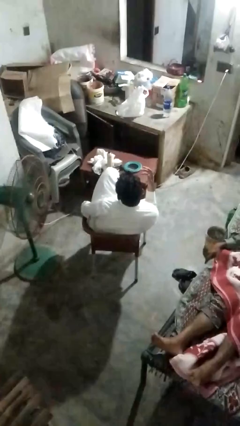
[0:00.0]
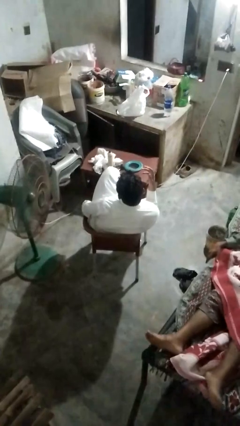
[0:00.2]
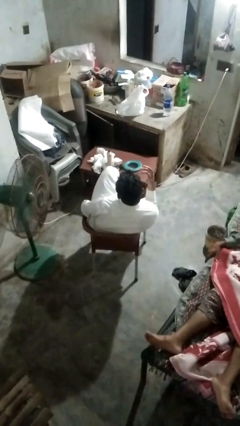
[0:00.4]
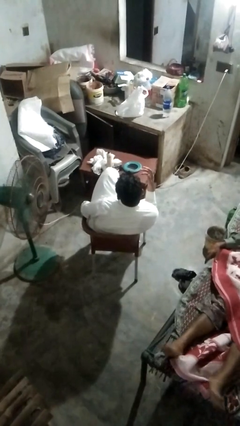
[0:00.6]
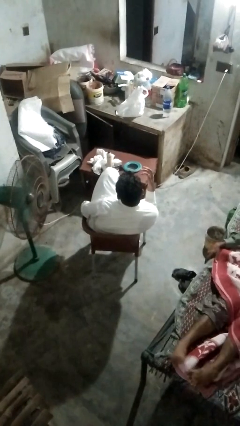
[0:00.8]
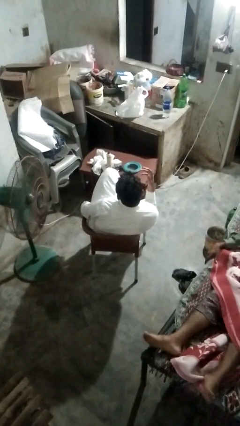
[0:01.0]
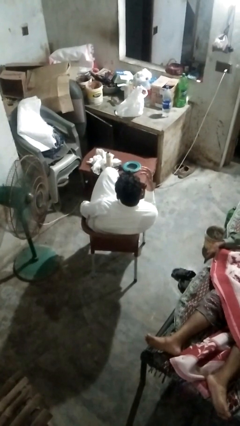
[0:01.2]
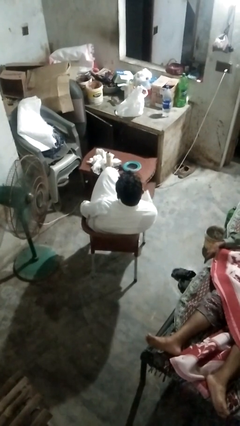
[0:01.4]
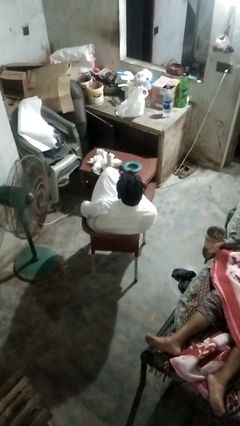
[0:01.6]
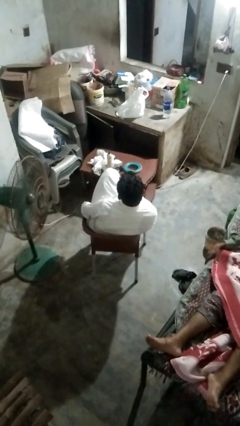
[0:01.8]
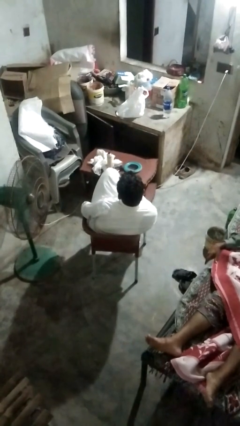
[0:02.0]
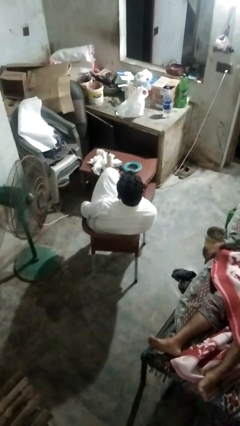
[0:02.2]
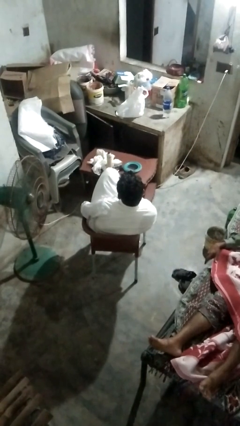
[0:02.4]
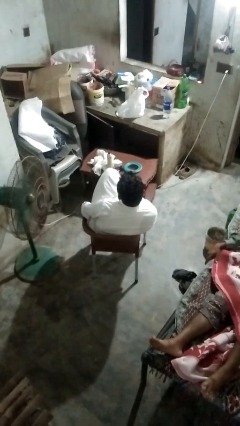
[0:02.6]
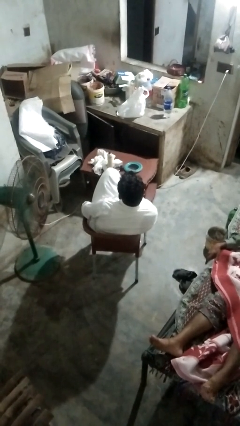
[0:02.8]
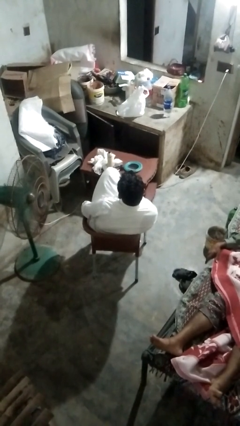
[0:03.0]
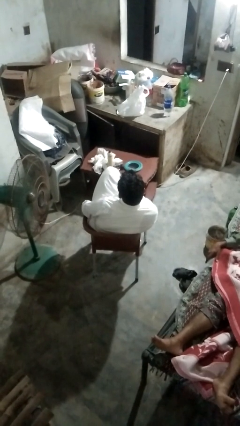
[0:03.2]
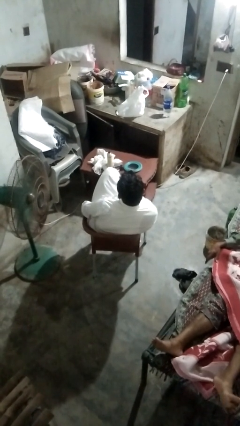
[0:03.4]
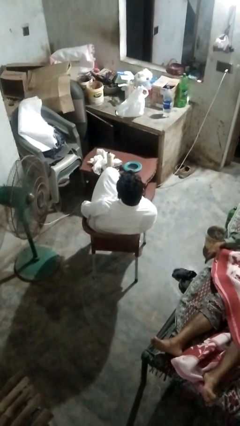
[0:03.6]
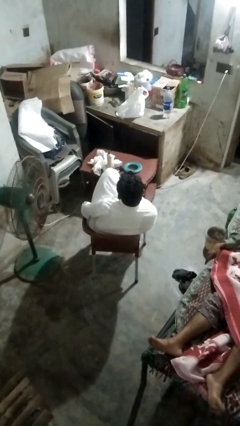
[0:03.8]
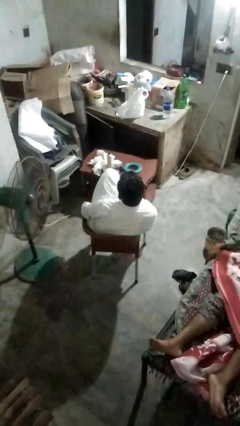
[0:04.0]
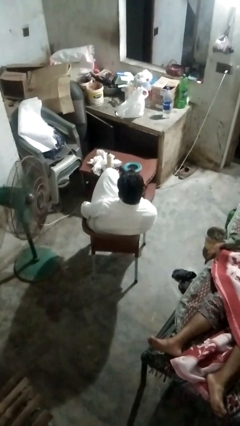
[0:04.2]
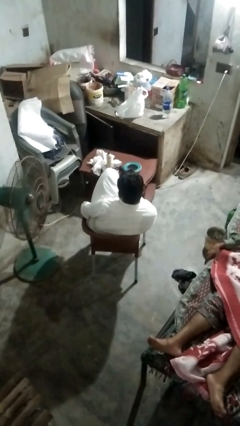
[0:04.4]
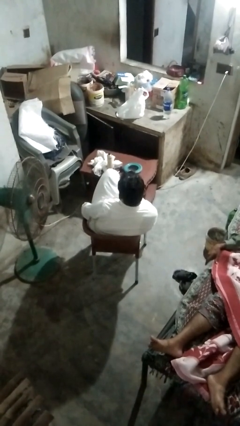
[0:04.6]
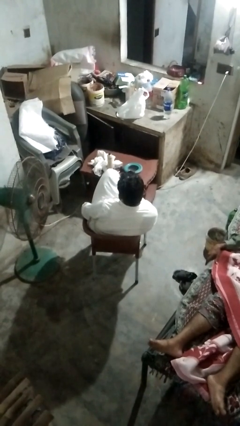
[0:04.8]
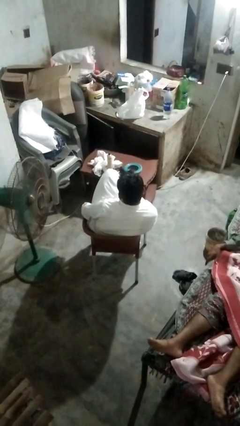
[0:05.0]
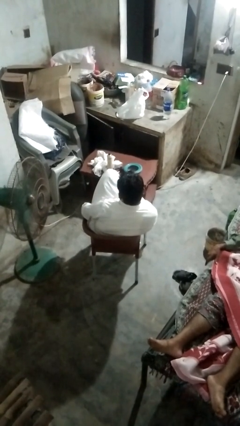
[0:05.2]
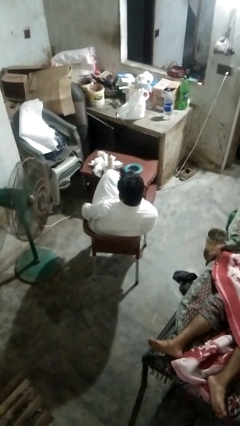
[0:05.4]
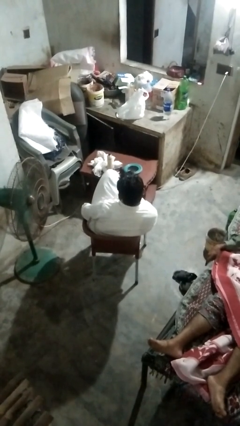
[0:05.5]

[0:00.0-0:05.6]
person licks fingers

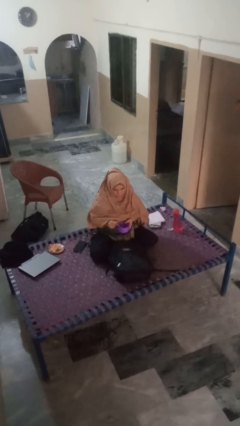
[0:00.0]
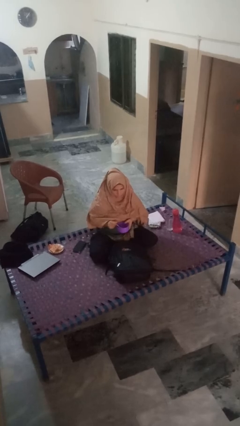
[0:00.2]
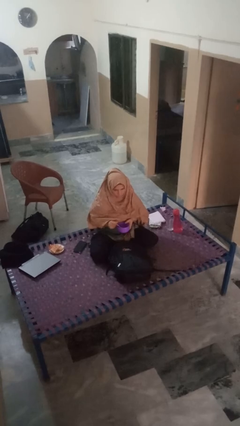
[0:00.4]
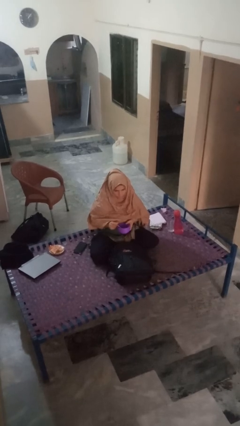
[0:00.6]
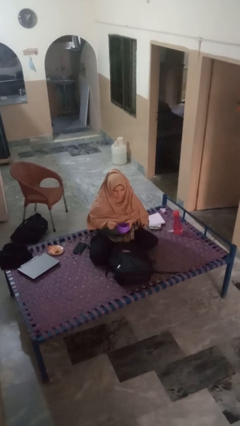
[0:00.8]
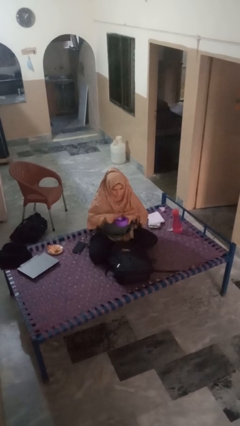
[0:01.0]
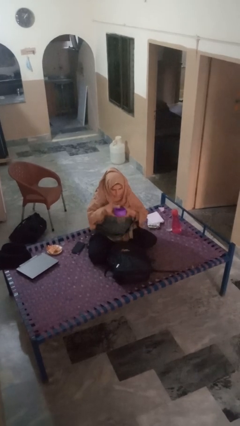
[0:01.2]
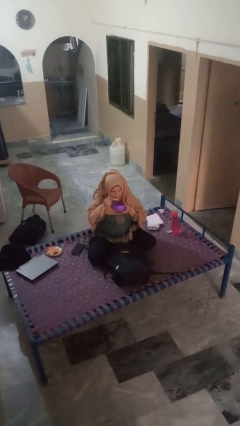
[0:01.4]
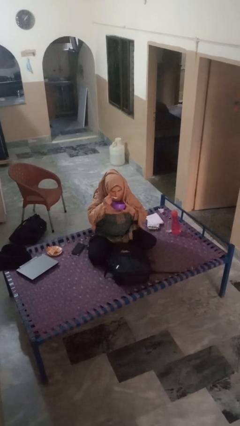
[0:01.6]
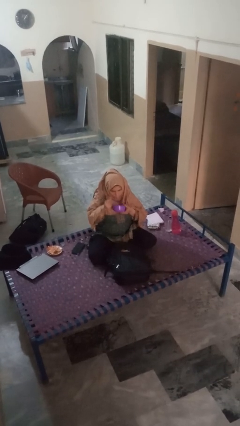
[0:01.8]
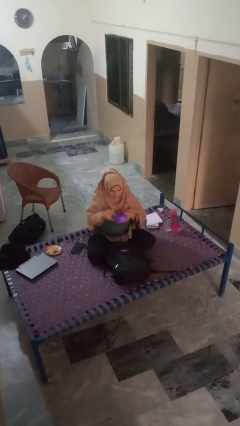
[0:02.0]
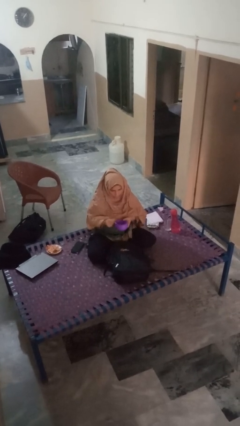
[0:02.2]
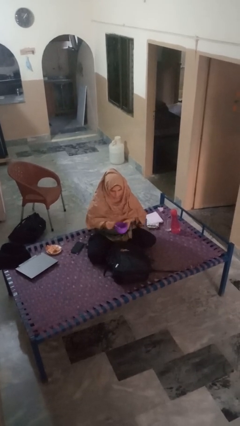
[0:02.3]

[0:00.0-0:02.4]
person eats snack from bag

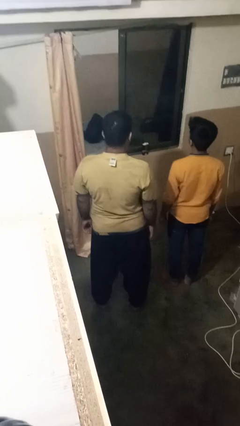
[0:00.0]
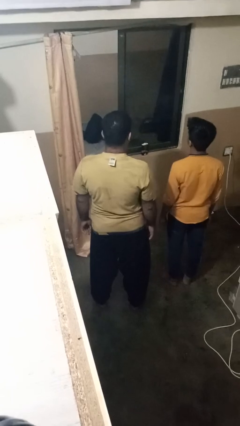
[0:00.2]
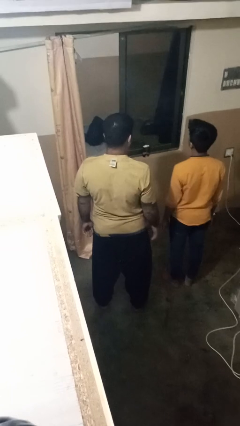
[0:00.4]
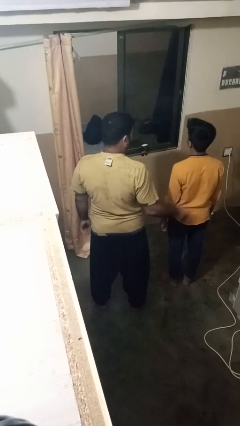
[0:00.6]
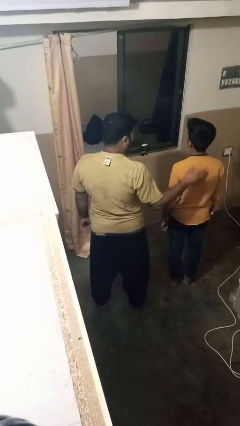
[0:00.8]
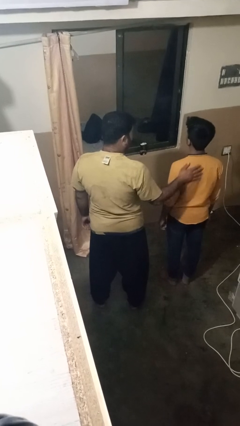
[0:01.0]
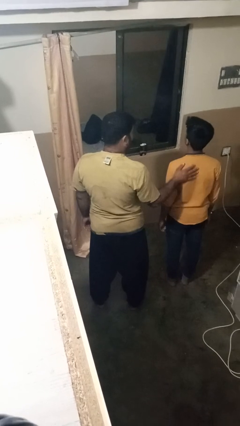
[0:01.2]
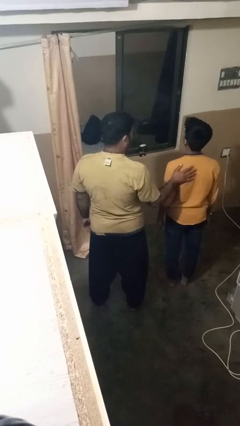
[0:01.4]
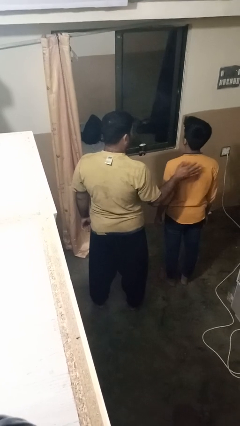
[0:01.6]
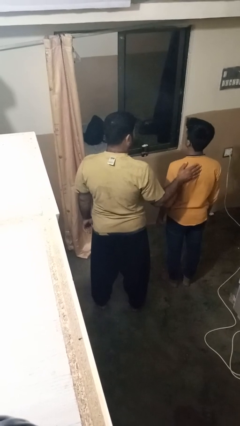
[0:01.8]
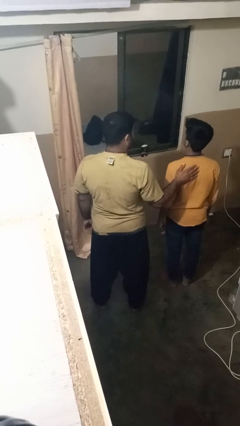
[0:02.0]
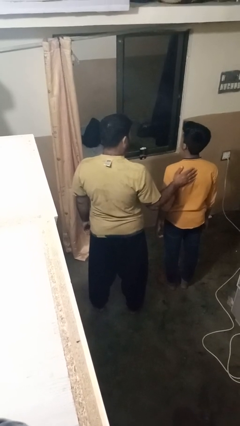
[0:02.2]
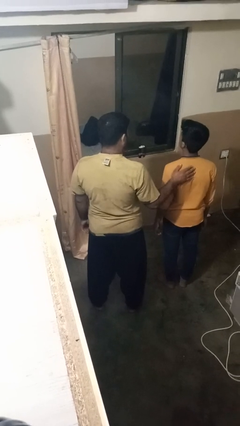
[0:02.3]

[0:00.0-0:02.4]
person touches back of person

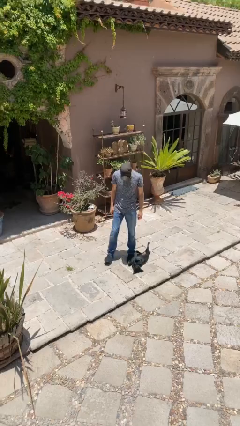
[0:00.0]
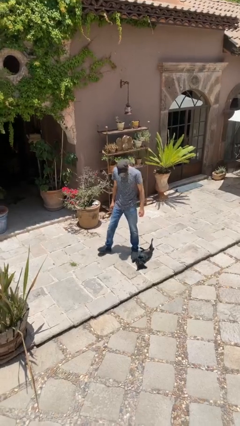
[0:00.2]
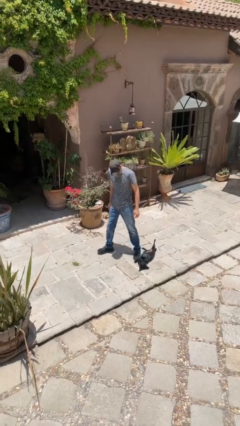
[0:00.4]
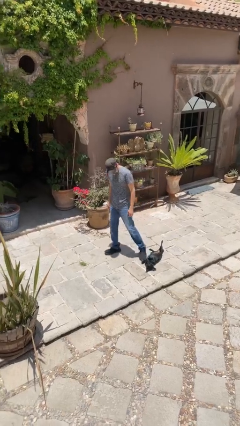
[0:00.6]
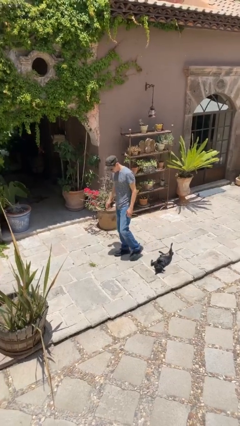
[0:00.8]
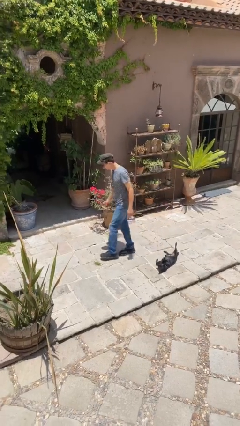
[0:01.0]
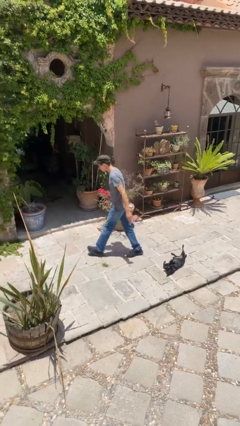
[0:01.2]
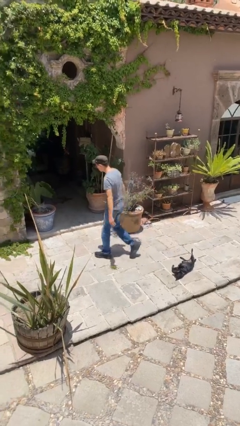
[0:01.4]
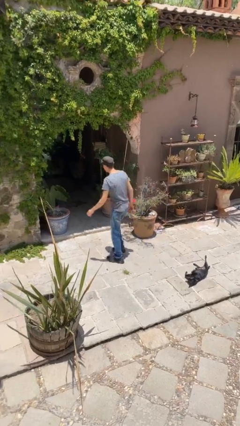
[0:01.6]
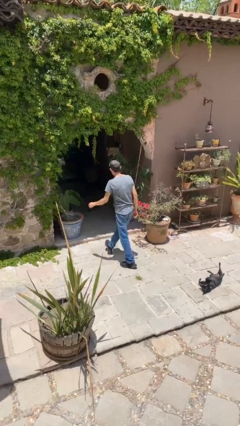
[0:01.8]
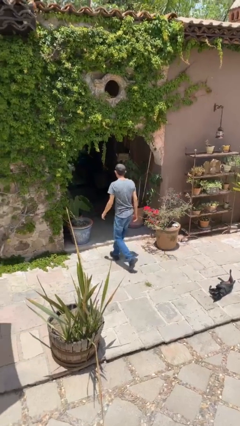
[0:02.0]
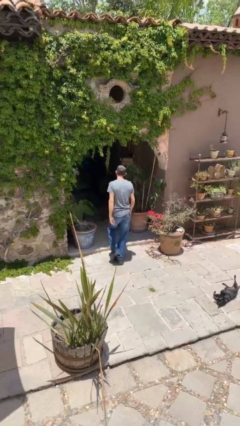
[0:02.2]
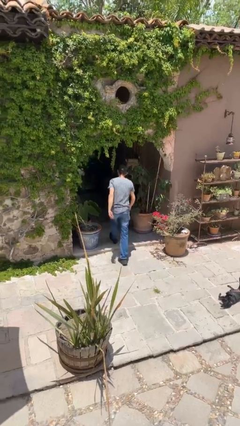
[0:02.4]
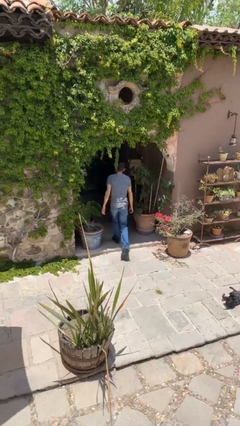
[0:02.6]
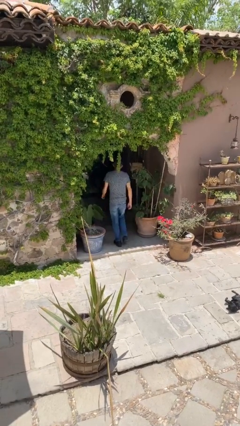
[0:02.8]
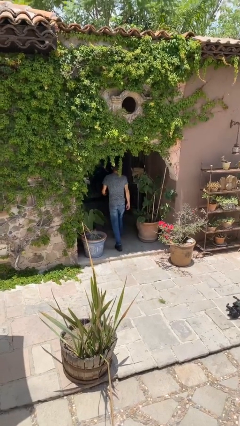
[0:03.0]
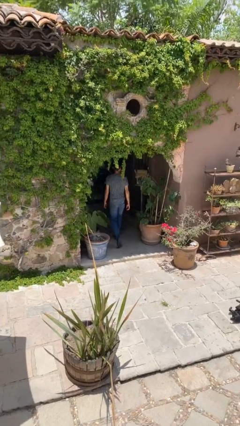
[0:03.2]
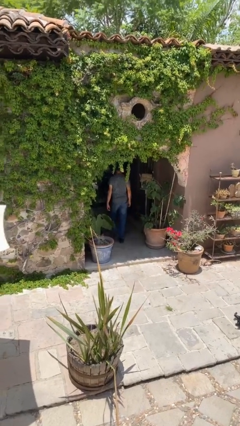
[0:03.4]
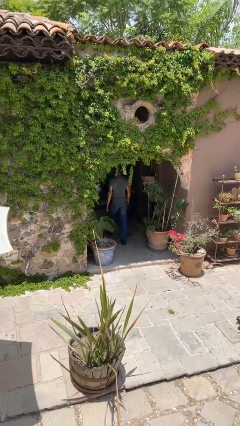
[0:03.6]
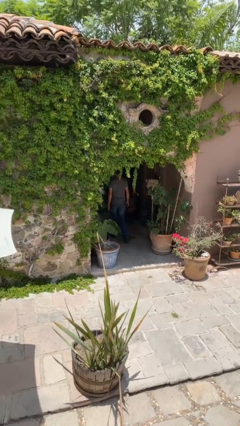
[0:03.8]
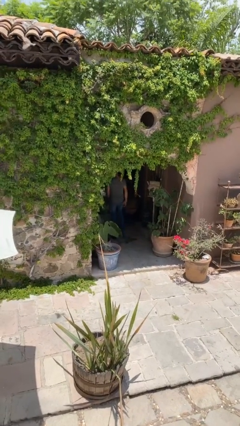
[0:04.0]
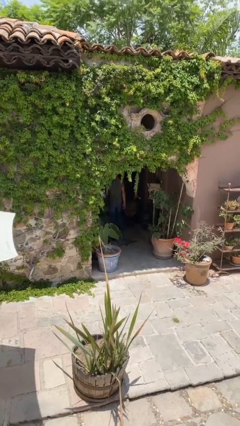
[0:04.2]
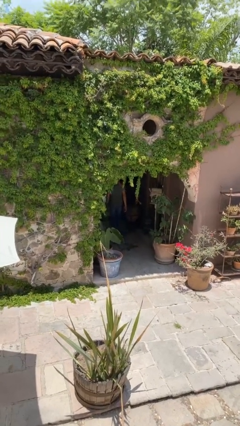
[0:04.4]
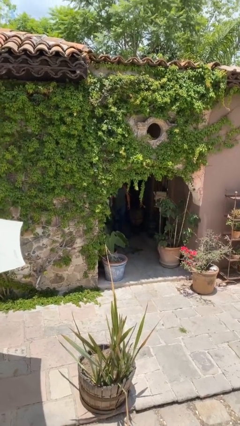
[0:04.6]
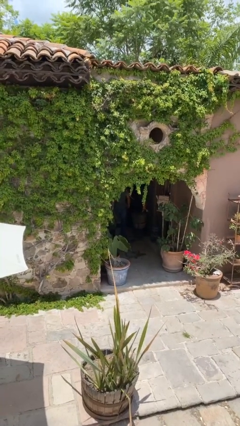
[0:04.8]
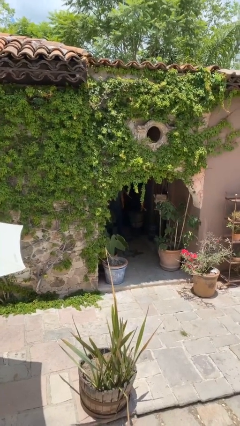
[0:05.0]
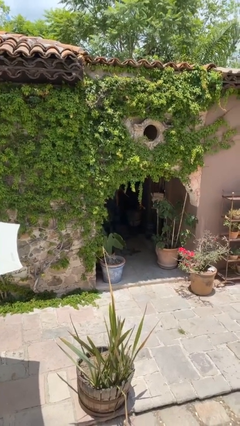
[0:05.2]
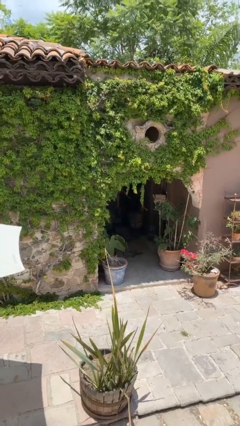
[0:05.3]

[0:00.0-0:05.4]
person exits scene through structure

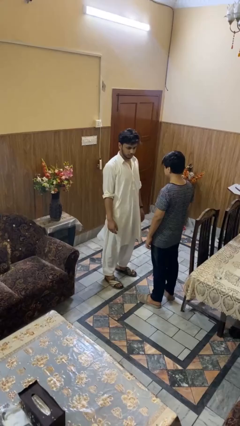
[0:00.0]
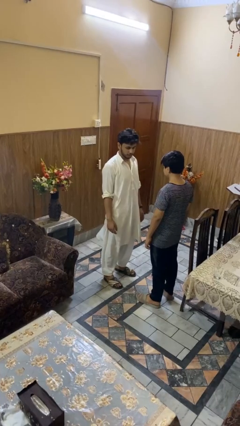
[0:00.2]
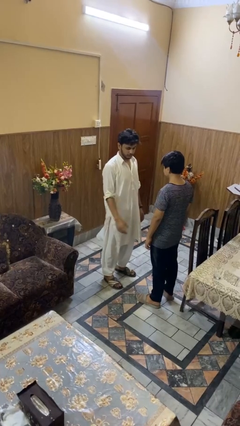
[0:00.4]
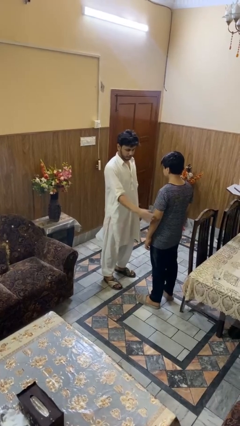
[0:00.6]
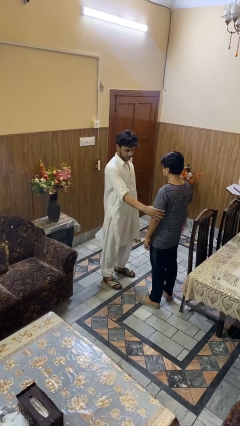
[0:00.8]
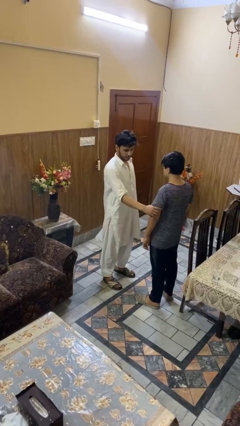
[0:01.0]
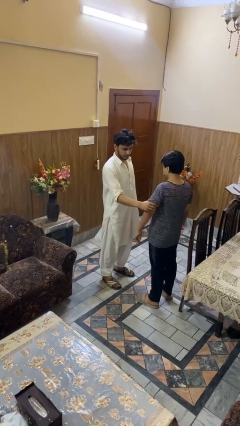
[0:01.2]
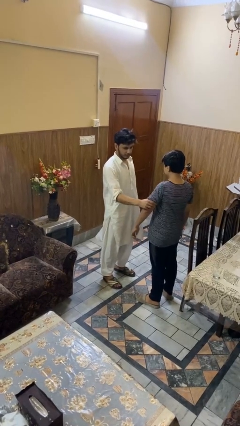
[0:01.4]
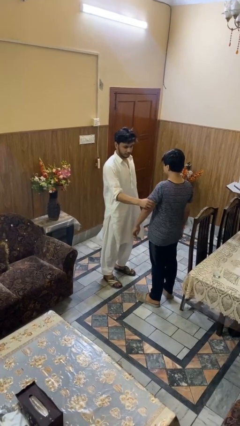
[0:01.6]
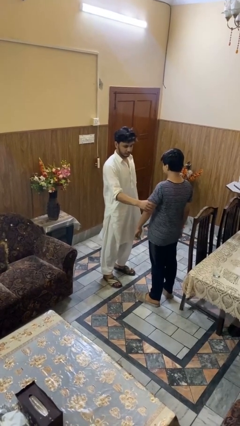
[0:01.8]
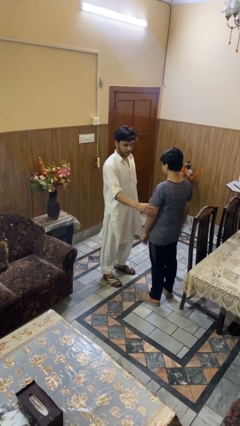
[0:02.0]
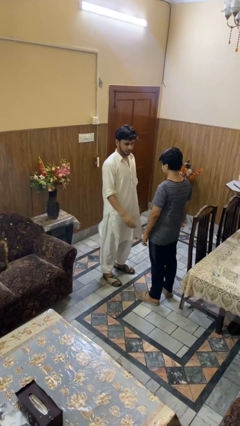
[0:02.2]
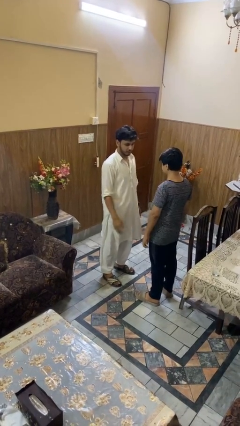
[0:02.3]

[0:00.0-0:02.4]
person grabs person by bicep
